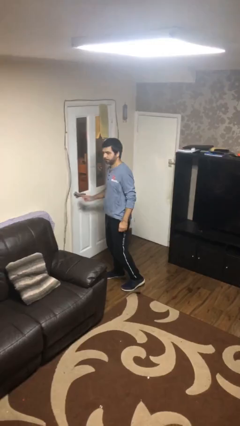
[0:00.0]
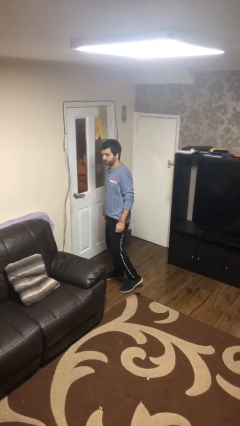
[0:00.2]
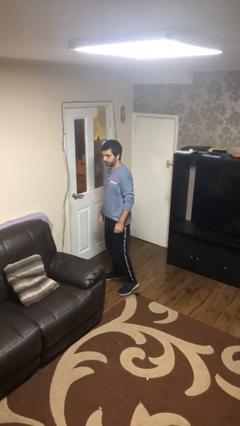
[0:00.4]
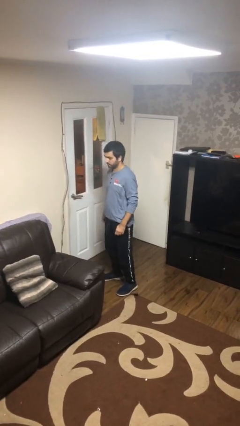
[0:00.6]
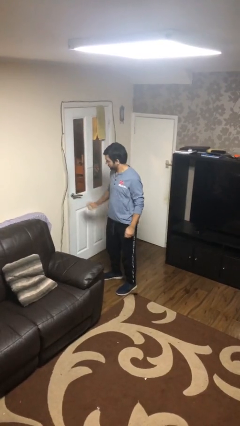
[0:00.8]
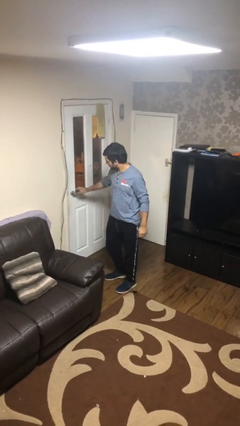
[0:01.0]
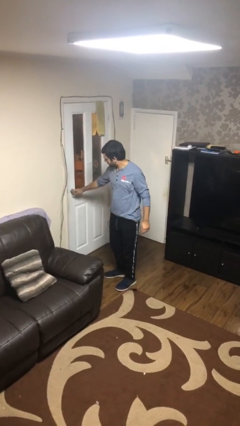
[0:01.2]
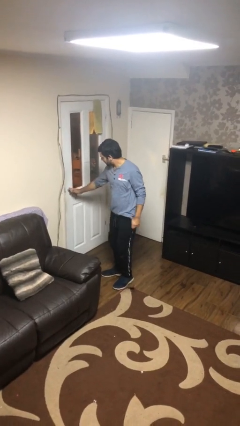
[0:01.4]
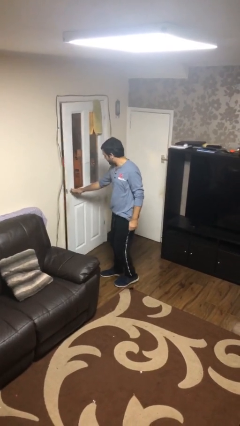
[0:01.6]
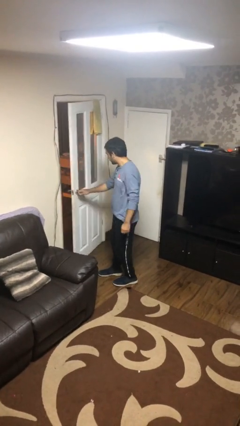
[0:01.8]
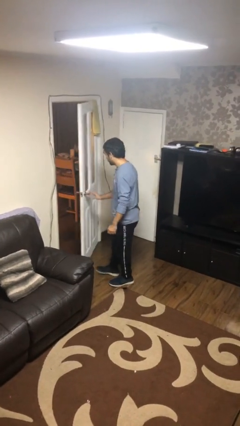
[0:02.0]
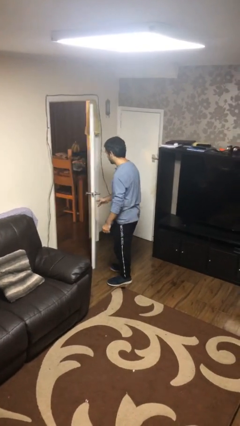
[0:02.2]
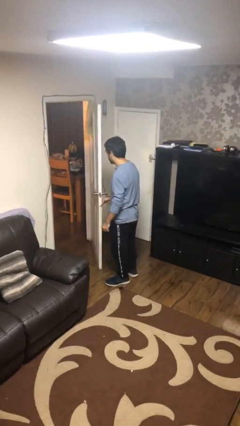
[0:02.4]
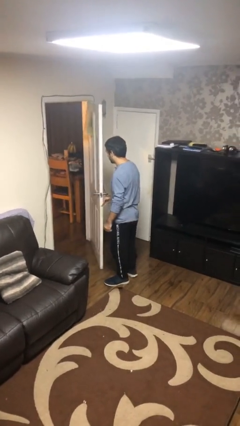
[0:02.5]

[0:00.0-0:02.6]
person opens facility door

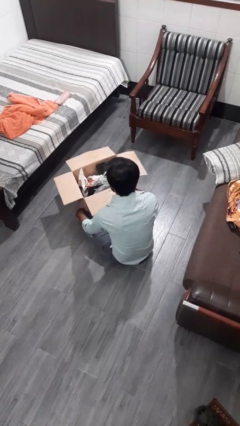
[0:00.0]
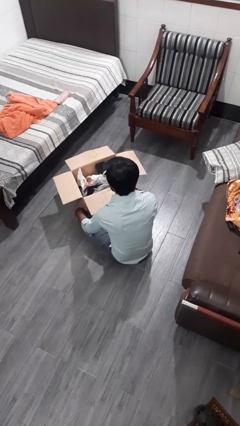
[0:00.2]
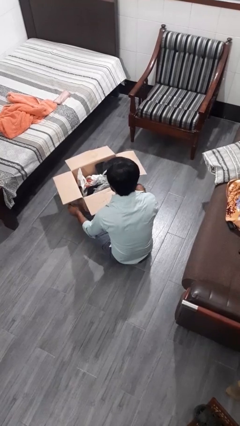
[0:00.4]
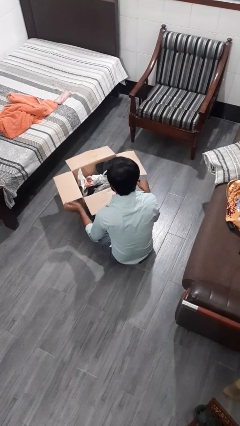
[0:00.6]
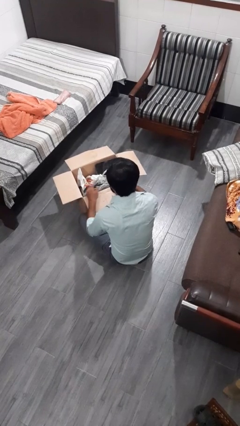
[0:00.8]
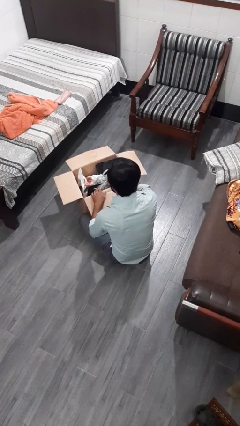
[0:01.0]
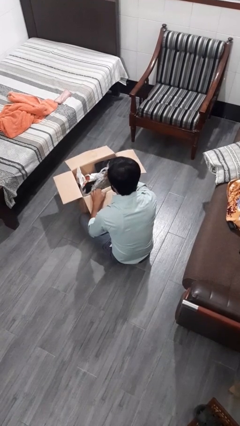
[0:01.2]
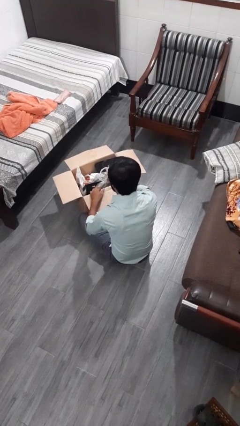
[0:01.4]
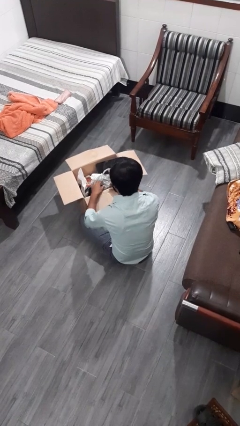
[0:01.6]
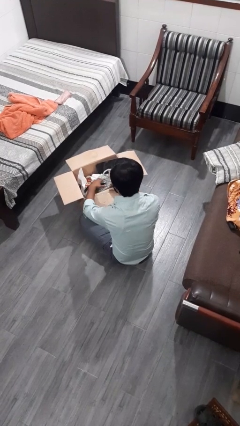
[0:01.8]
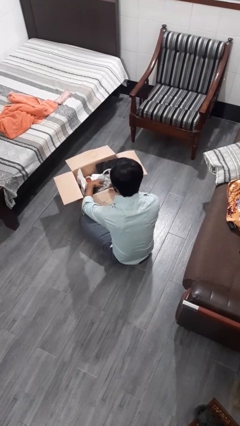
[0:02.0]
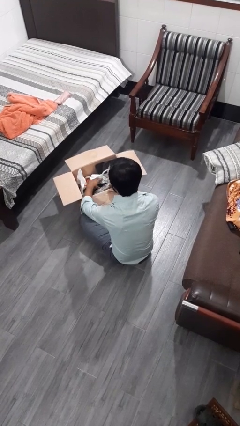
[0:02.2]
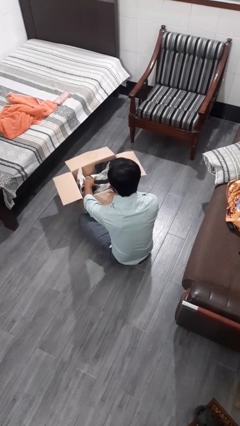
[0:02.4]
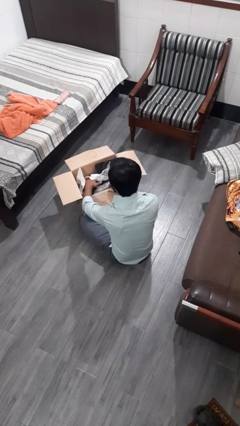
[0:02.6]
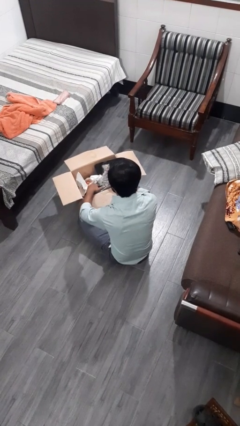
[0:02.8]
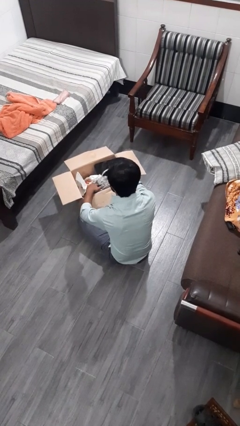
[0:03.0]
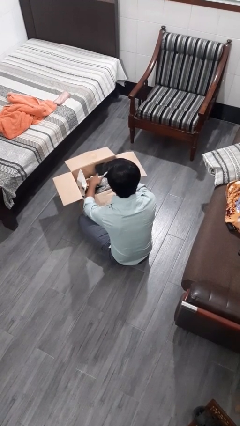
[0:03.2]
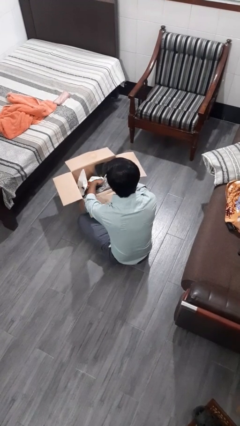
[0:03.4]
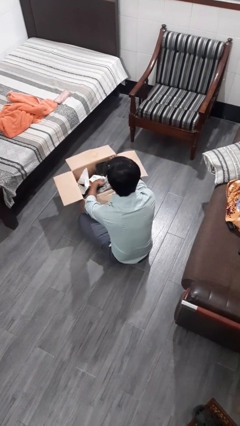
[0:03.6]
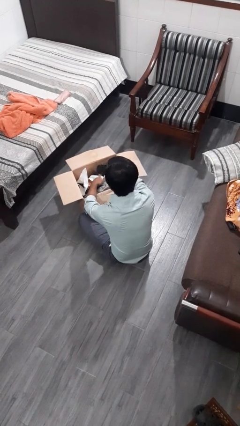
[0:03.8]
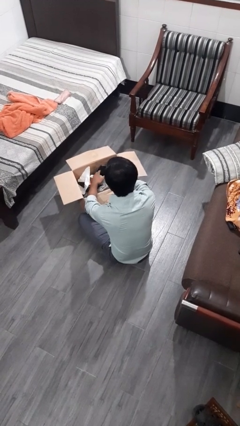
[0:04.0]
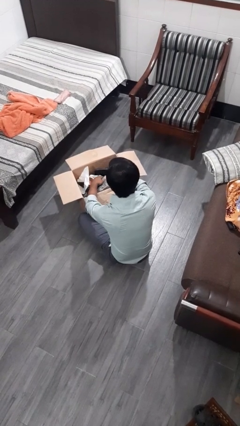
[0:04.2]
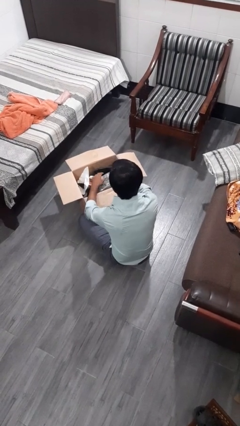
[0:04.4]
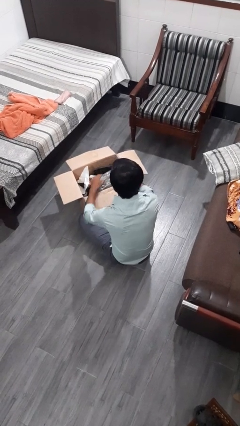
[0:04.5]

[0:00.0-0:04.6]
person searches in box

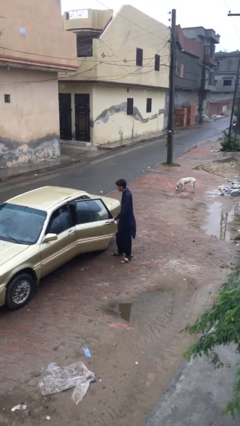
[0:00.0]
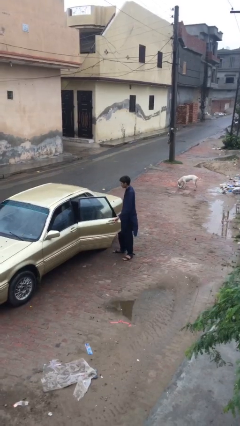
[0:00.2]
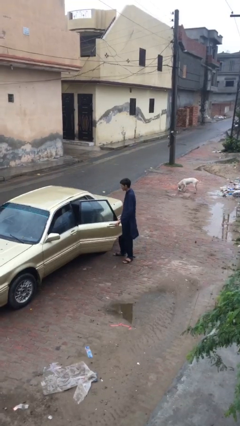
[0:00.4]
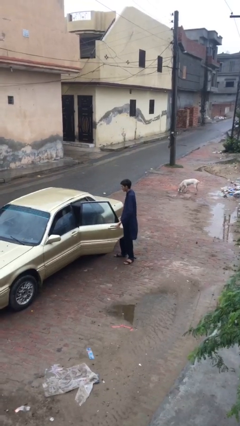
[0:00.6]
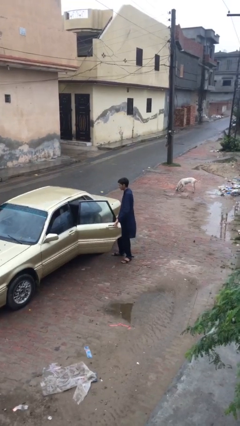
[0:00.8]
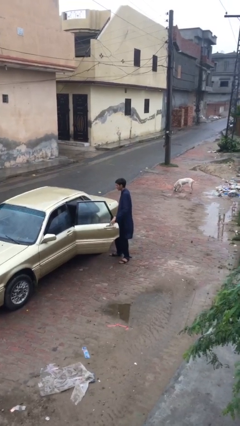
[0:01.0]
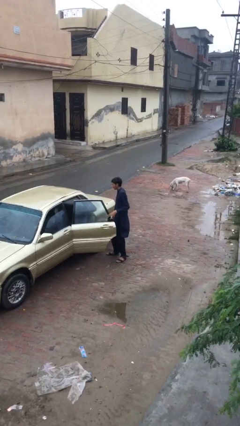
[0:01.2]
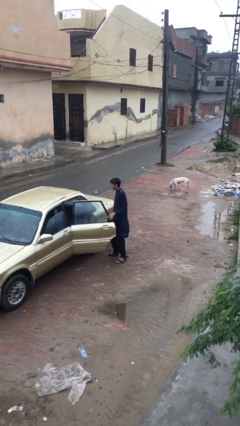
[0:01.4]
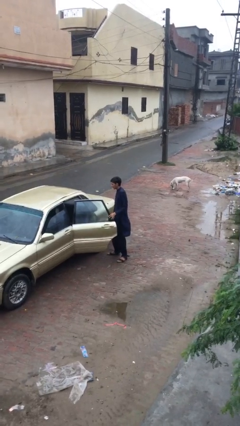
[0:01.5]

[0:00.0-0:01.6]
person opens car door

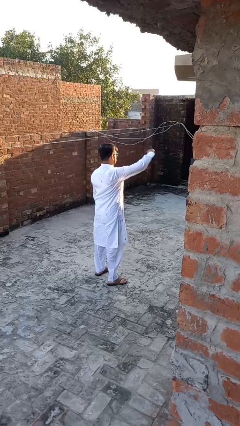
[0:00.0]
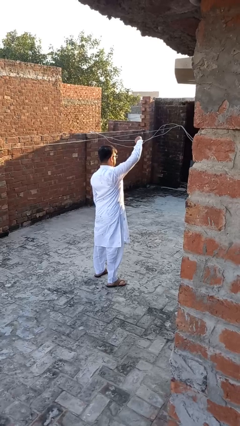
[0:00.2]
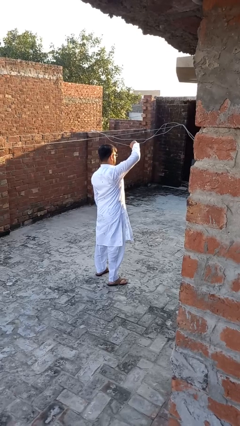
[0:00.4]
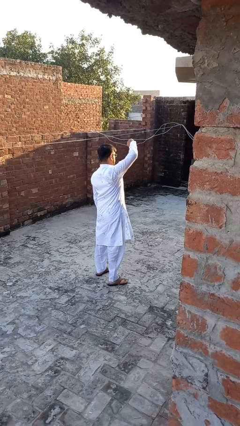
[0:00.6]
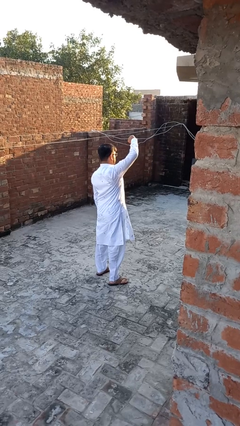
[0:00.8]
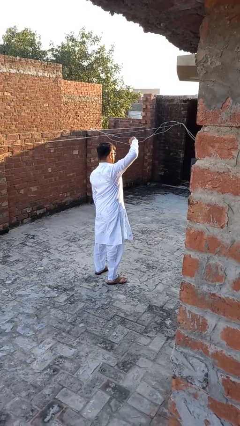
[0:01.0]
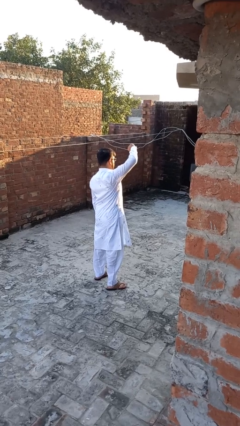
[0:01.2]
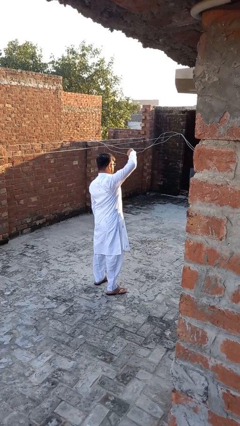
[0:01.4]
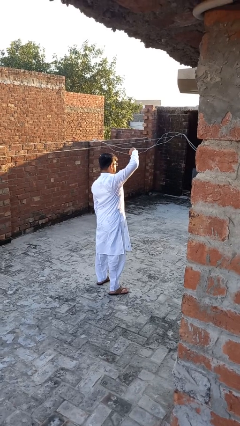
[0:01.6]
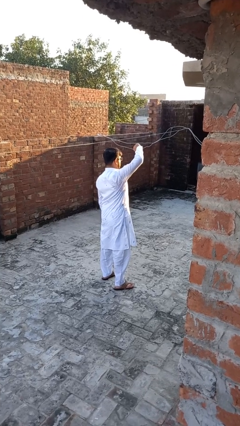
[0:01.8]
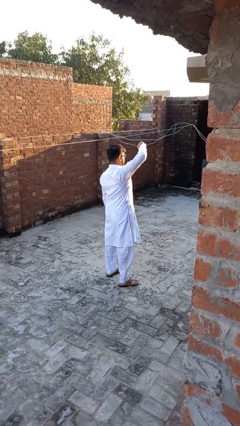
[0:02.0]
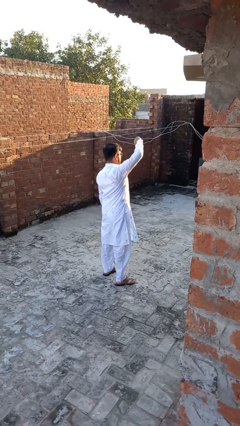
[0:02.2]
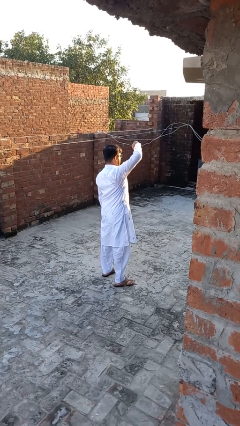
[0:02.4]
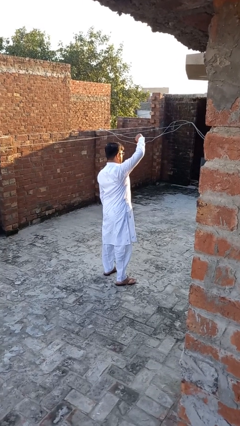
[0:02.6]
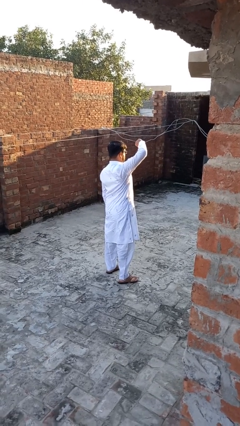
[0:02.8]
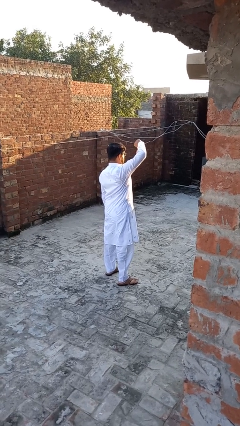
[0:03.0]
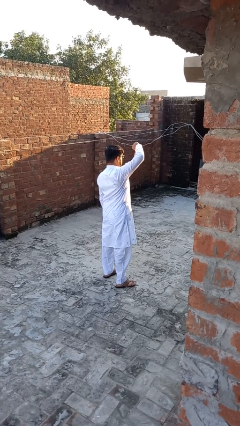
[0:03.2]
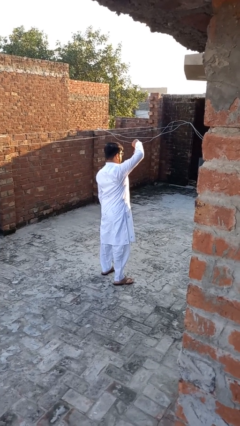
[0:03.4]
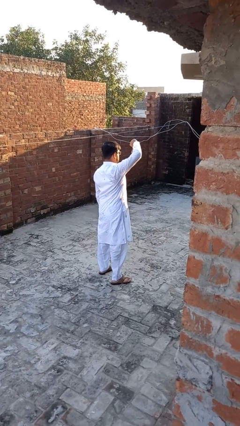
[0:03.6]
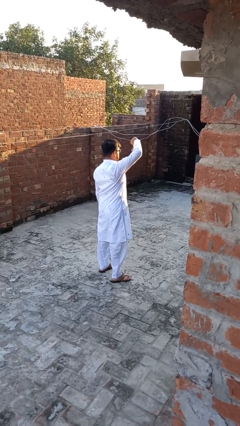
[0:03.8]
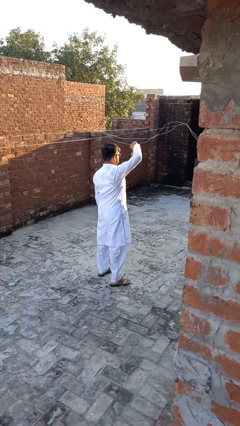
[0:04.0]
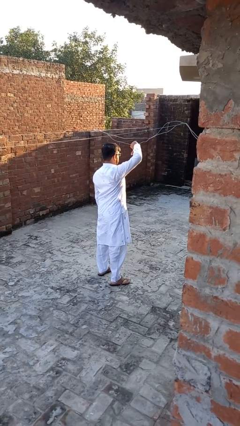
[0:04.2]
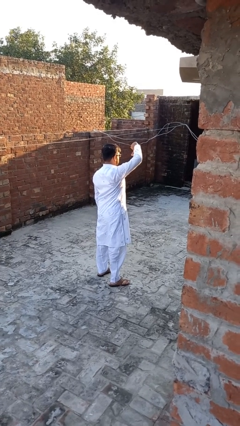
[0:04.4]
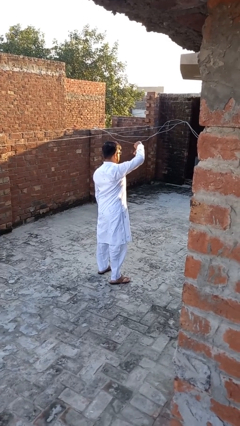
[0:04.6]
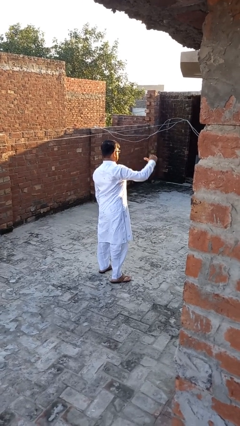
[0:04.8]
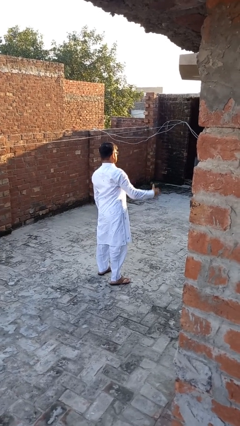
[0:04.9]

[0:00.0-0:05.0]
person gestures thumbs down

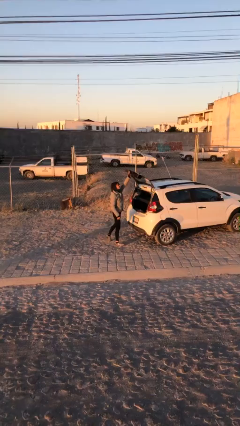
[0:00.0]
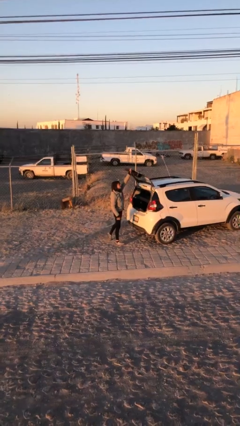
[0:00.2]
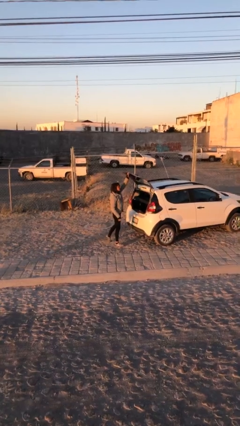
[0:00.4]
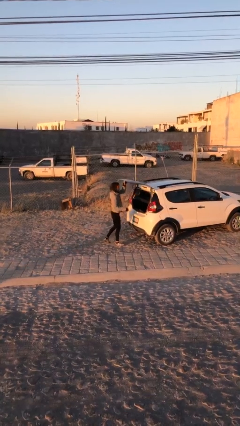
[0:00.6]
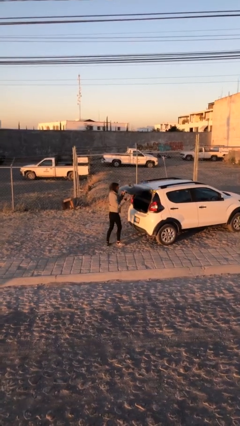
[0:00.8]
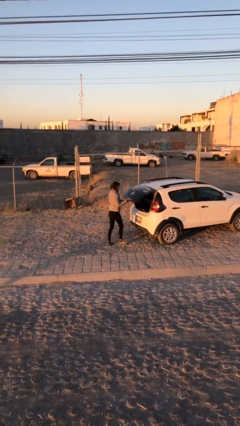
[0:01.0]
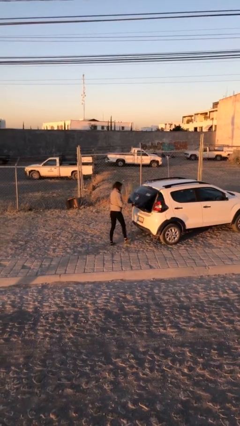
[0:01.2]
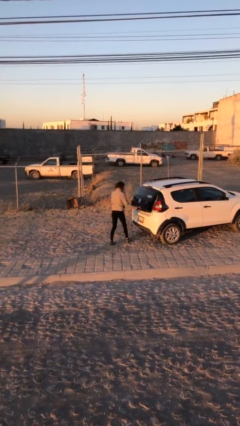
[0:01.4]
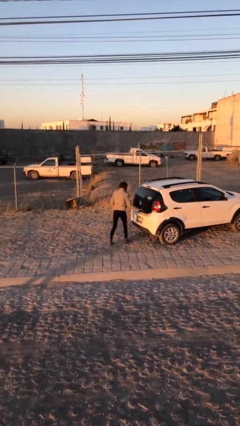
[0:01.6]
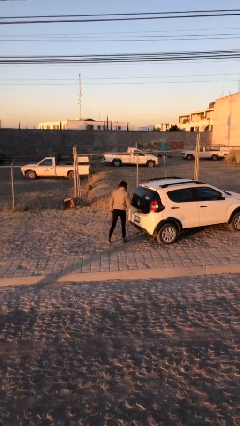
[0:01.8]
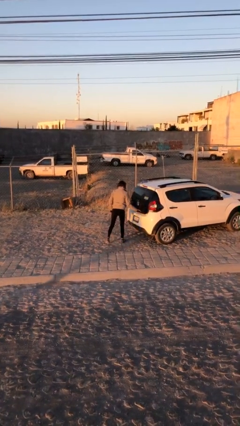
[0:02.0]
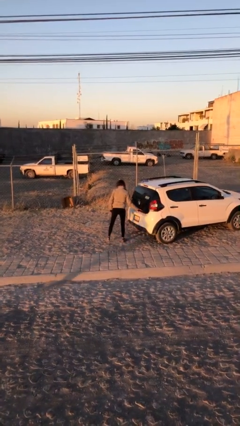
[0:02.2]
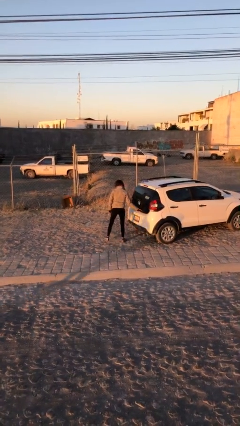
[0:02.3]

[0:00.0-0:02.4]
person closes car trunk

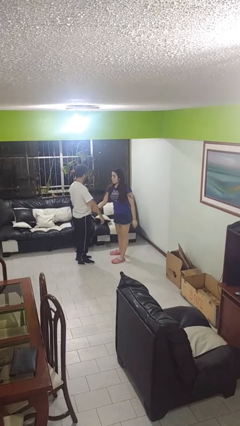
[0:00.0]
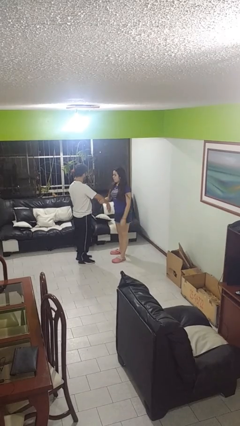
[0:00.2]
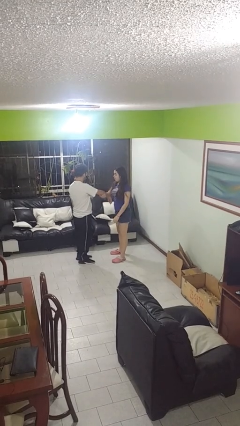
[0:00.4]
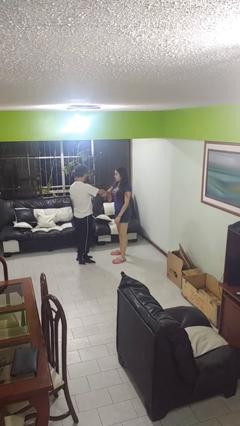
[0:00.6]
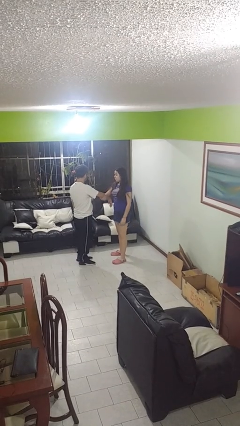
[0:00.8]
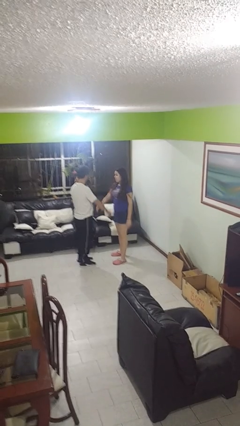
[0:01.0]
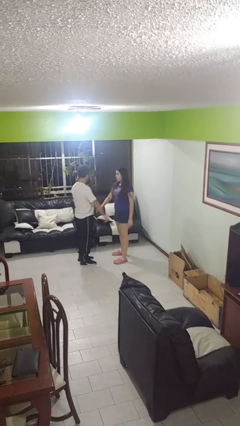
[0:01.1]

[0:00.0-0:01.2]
person grabs person by forearm
